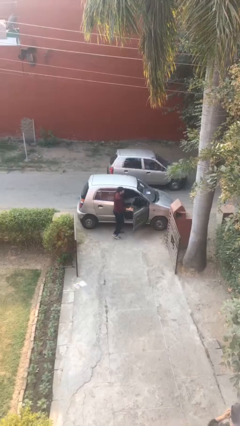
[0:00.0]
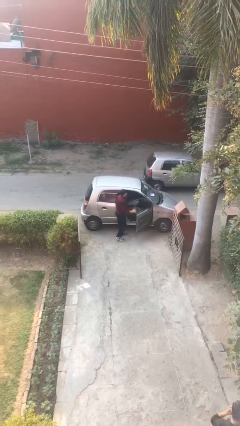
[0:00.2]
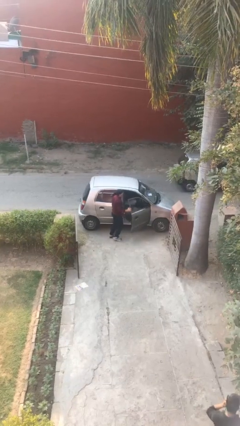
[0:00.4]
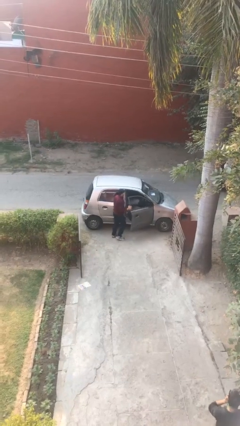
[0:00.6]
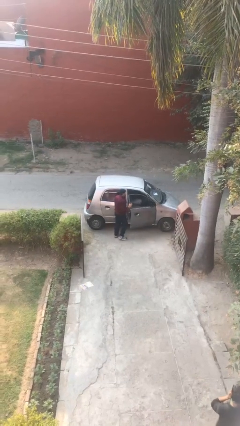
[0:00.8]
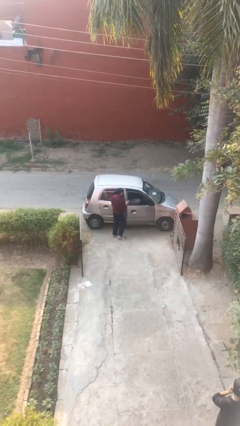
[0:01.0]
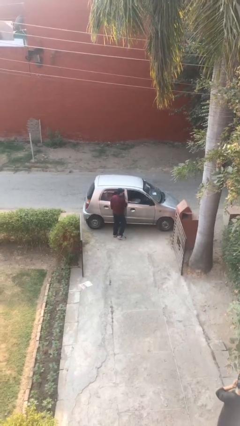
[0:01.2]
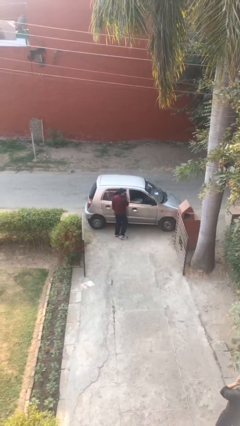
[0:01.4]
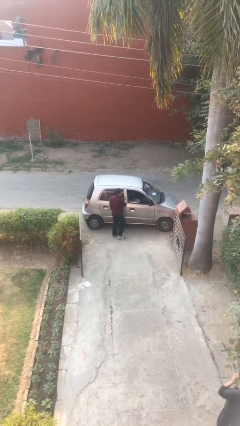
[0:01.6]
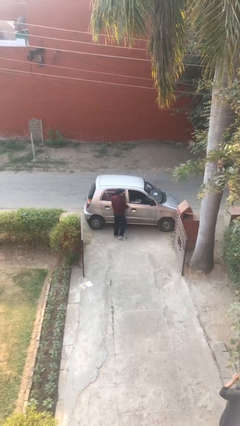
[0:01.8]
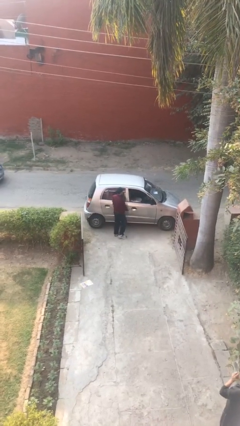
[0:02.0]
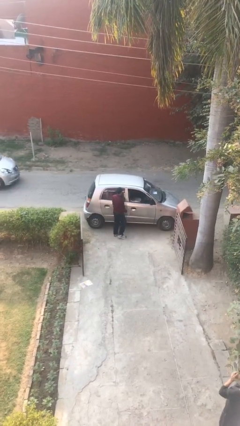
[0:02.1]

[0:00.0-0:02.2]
person closes car door

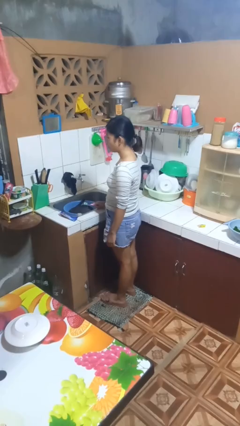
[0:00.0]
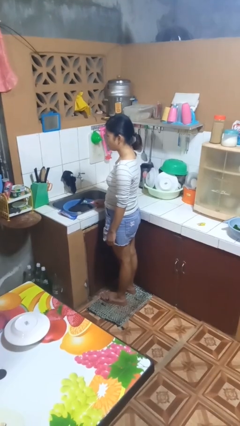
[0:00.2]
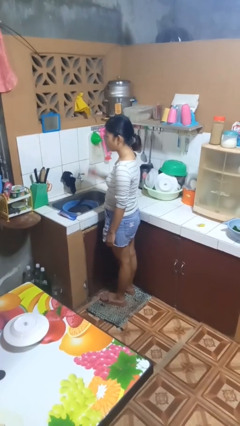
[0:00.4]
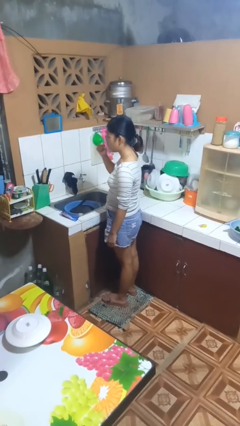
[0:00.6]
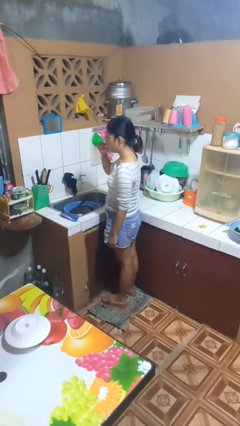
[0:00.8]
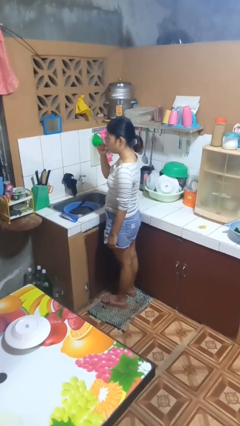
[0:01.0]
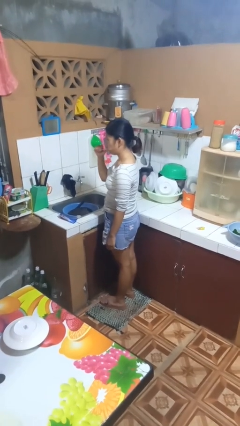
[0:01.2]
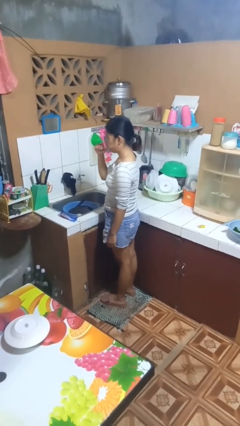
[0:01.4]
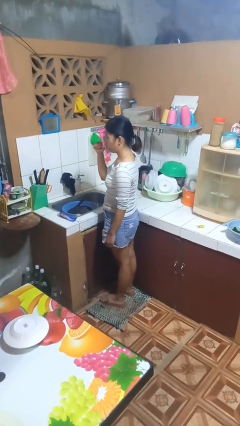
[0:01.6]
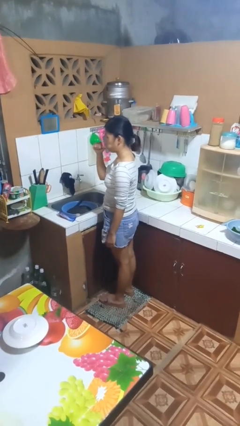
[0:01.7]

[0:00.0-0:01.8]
person brushes teeth

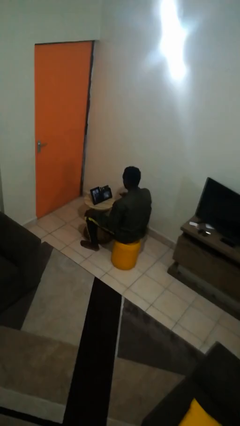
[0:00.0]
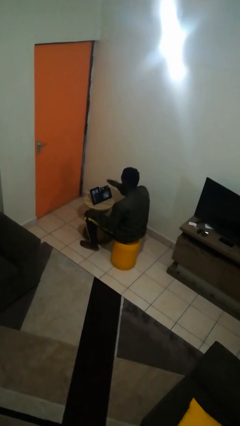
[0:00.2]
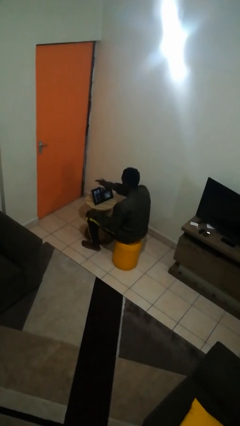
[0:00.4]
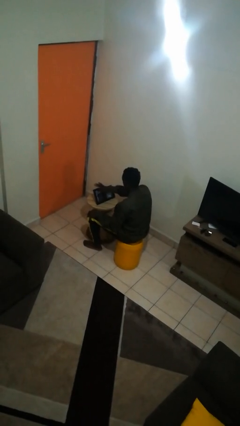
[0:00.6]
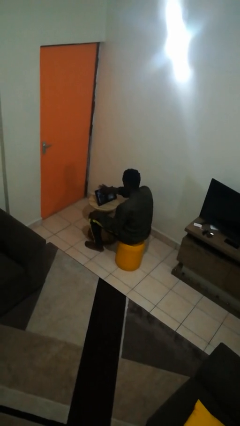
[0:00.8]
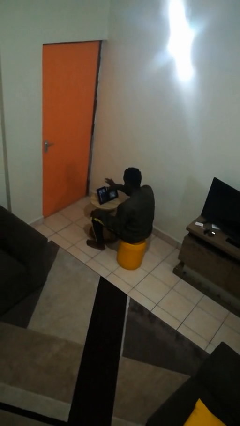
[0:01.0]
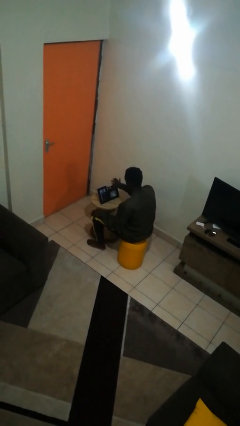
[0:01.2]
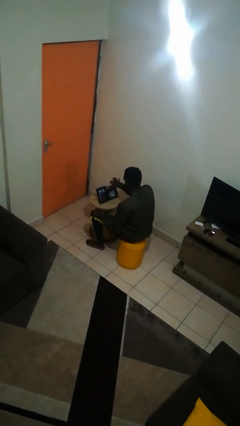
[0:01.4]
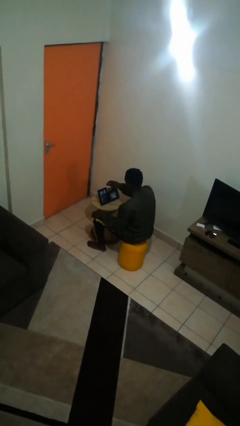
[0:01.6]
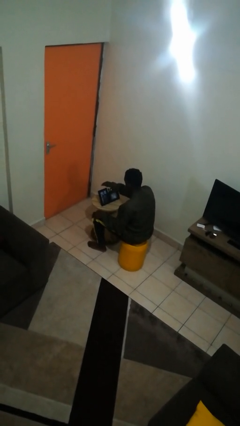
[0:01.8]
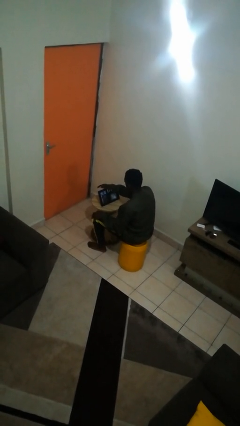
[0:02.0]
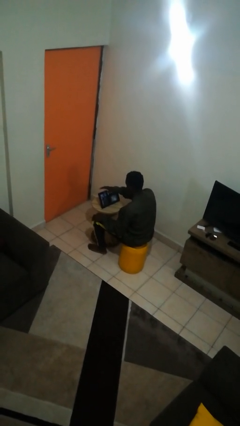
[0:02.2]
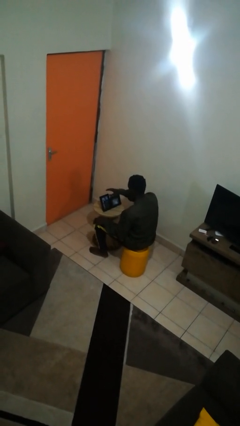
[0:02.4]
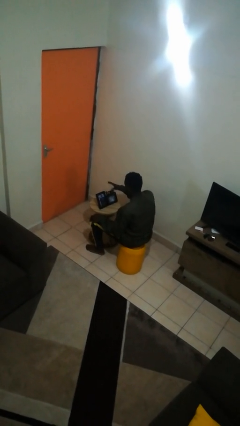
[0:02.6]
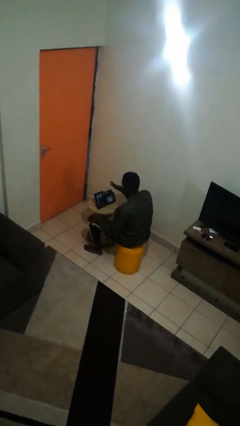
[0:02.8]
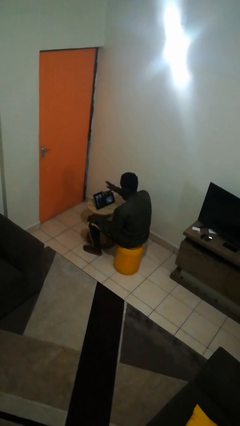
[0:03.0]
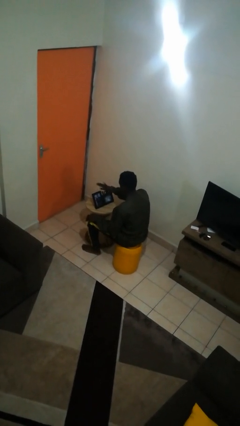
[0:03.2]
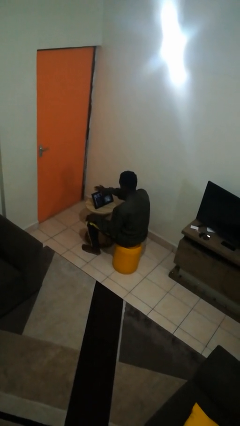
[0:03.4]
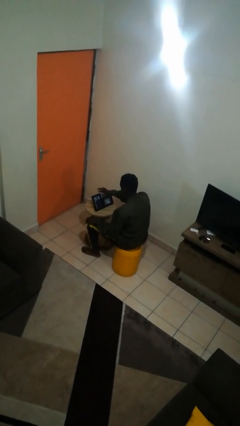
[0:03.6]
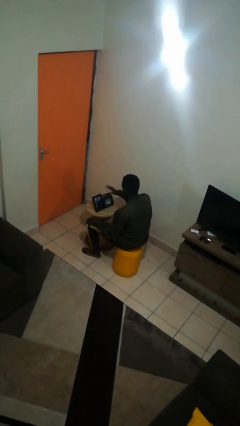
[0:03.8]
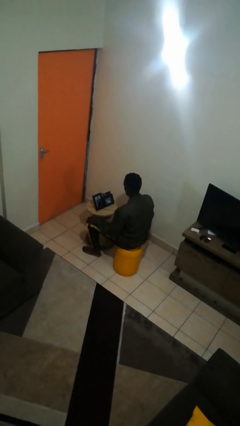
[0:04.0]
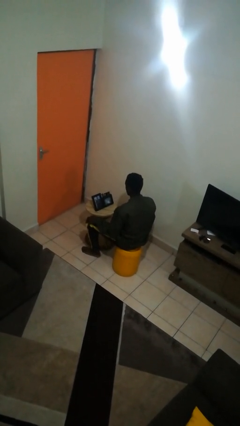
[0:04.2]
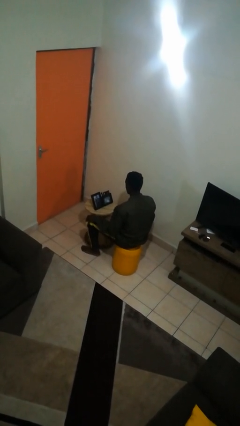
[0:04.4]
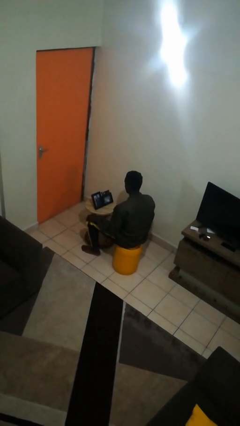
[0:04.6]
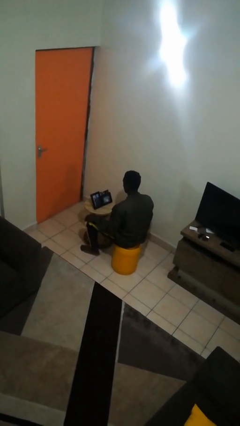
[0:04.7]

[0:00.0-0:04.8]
person waves hand over object

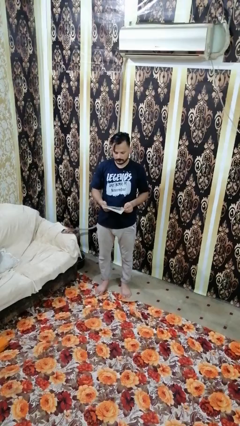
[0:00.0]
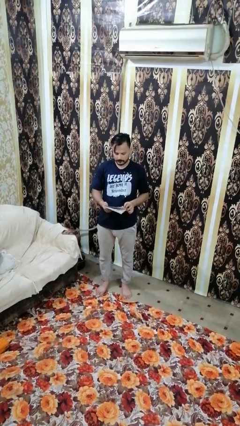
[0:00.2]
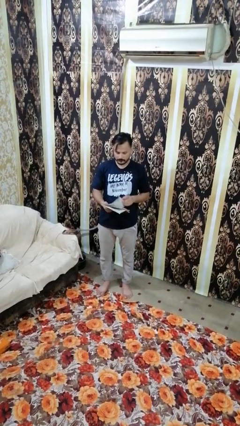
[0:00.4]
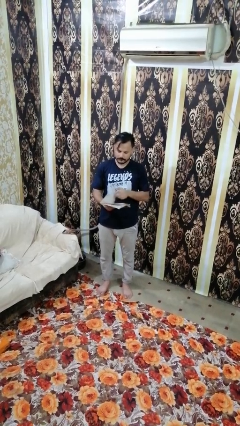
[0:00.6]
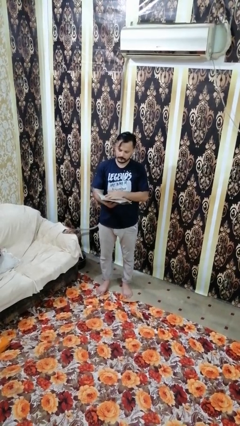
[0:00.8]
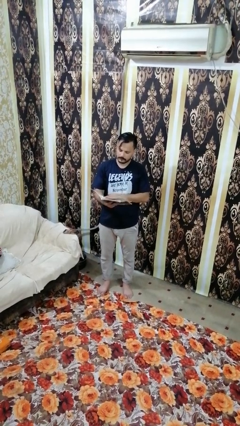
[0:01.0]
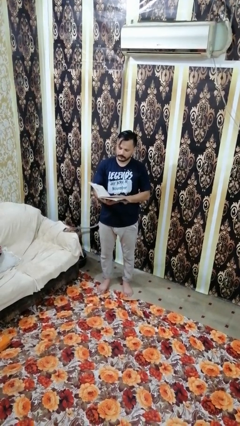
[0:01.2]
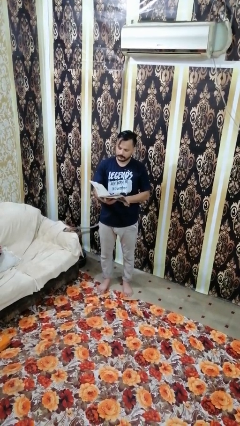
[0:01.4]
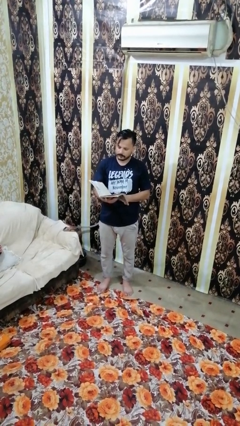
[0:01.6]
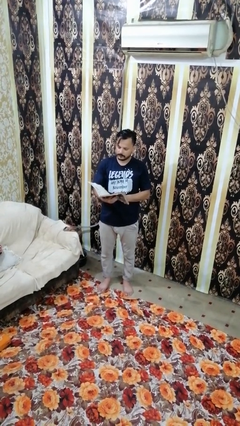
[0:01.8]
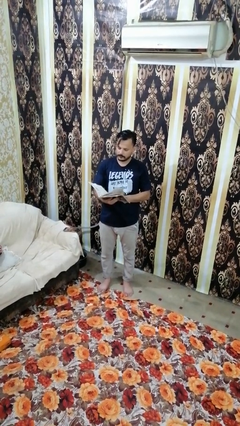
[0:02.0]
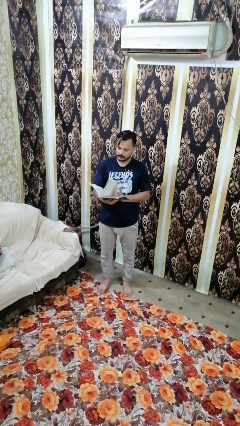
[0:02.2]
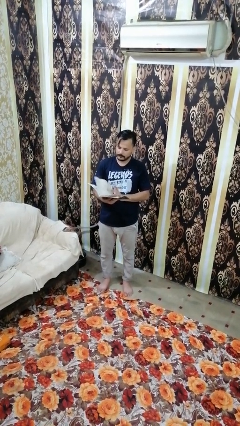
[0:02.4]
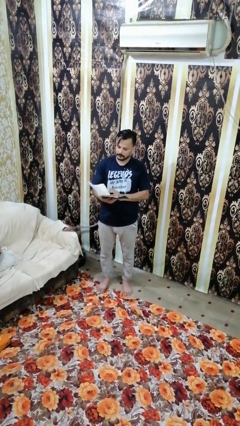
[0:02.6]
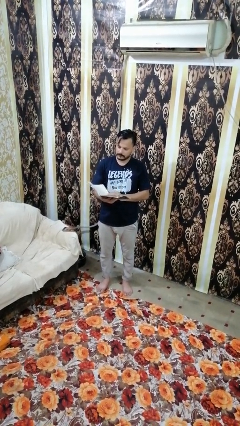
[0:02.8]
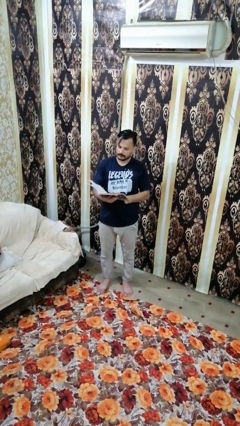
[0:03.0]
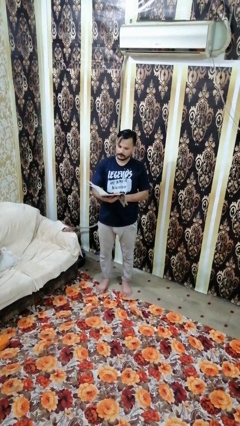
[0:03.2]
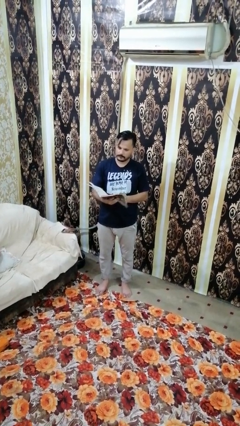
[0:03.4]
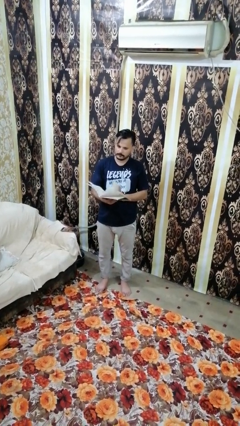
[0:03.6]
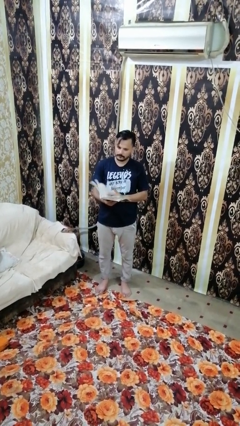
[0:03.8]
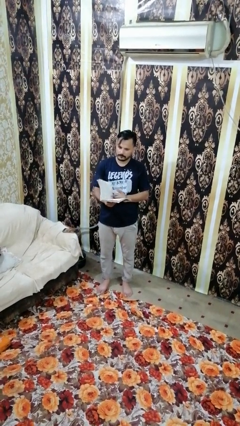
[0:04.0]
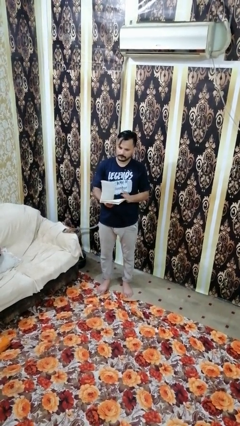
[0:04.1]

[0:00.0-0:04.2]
person reads book

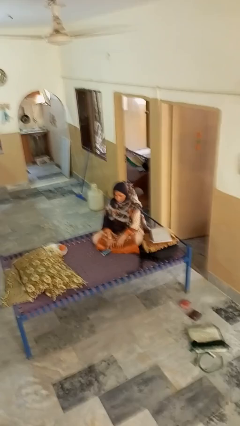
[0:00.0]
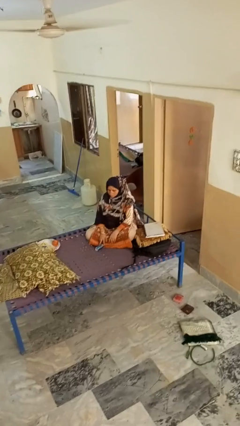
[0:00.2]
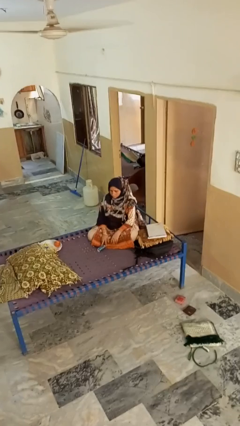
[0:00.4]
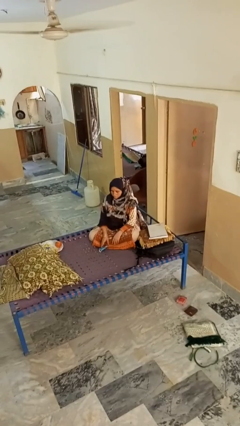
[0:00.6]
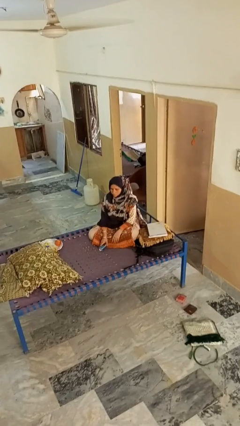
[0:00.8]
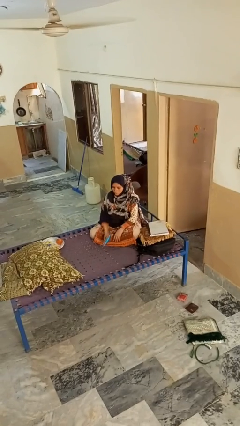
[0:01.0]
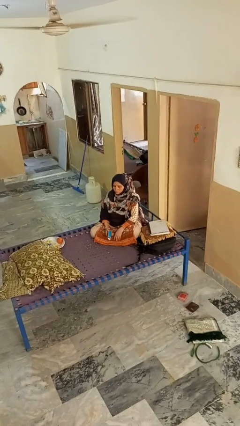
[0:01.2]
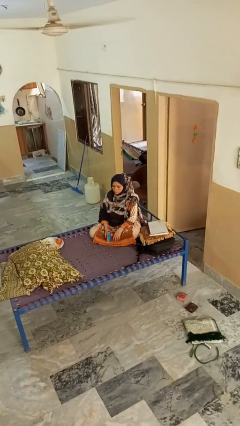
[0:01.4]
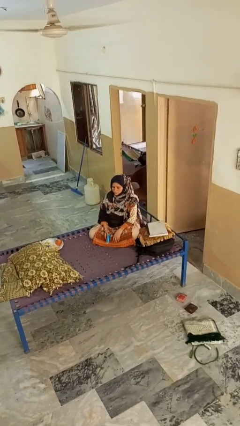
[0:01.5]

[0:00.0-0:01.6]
person picks up object from floor

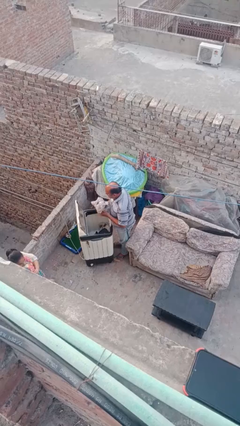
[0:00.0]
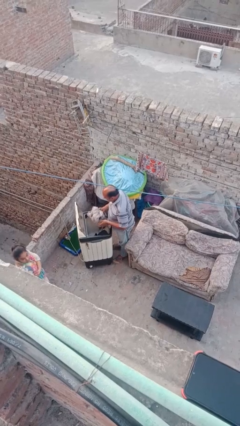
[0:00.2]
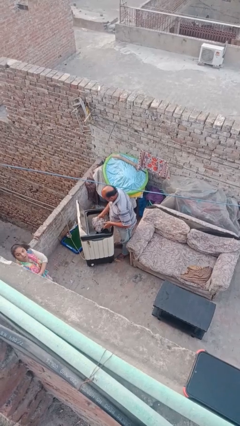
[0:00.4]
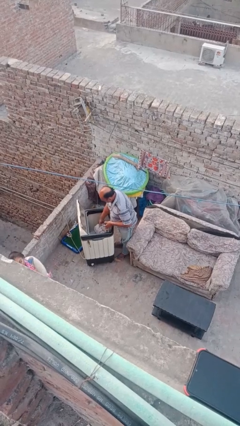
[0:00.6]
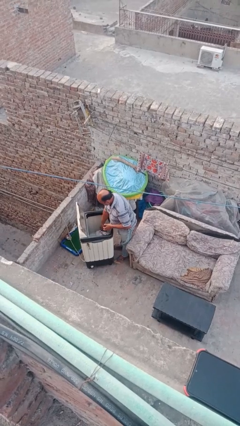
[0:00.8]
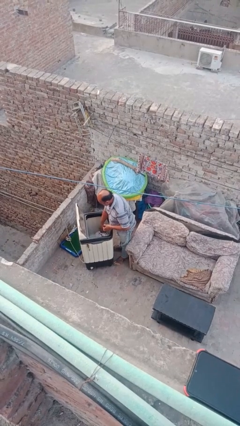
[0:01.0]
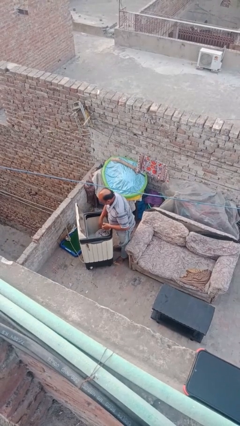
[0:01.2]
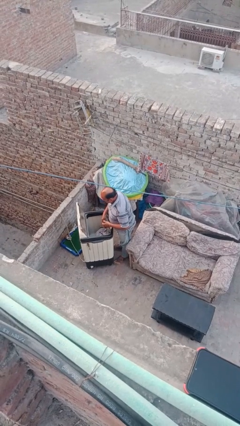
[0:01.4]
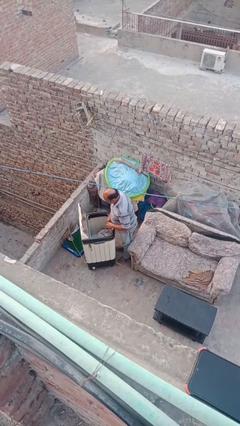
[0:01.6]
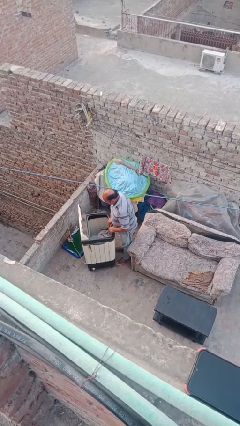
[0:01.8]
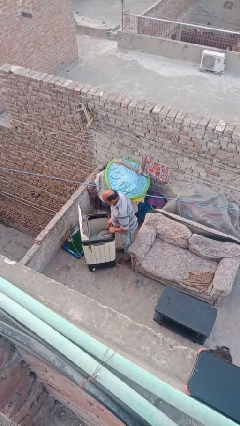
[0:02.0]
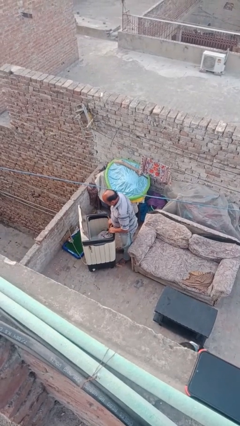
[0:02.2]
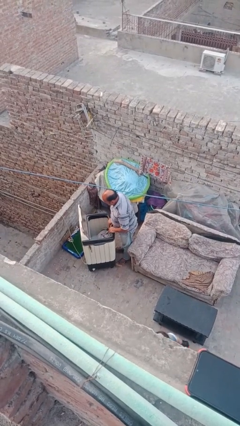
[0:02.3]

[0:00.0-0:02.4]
person loads clotheswasher
